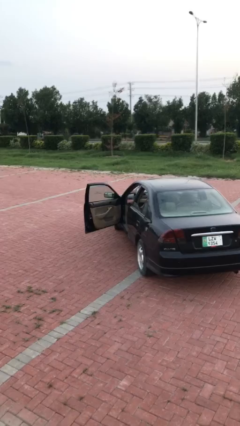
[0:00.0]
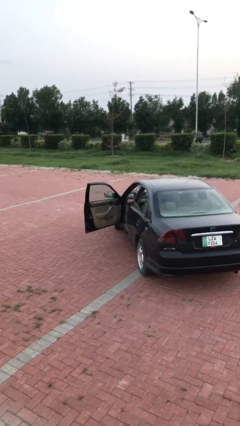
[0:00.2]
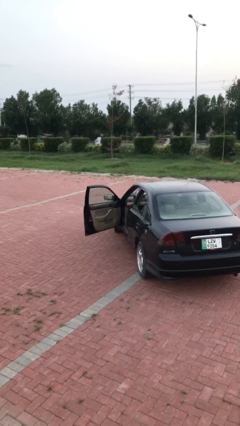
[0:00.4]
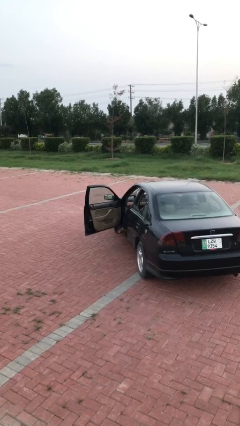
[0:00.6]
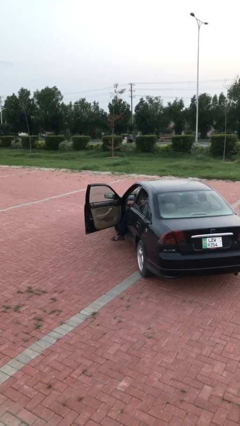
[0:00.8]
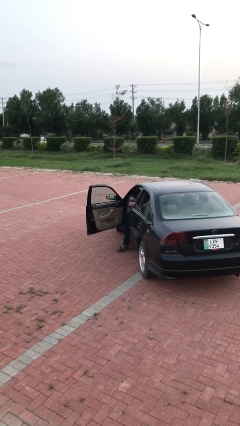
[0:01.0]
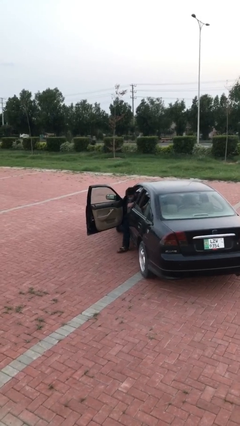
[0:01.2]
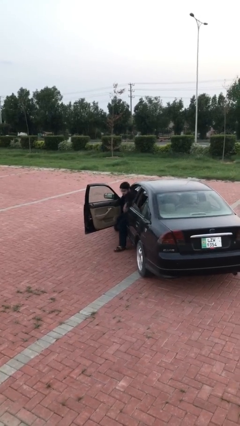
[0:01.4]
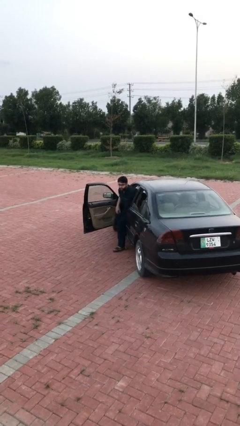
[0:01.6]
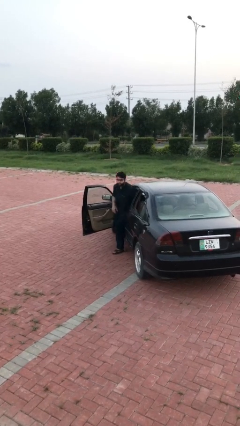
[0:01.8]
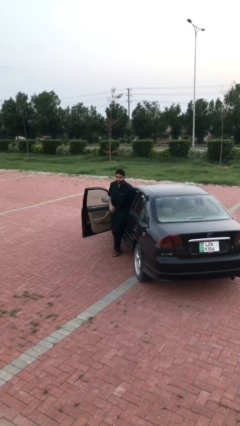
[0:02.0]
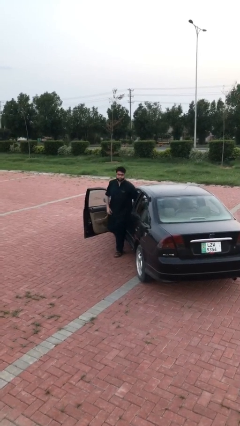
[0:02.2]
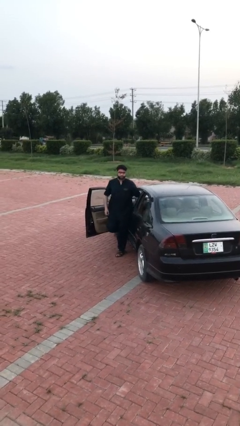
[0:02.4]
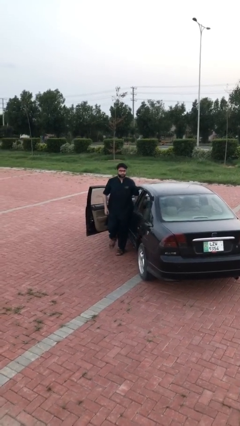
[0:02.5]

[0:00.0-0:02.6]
person exits car

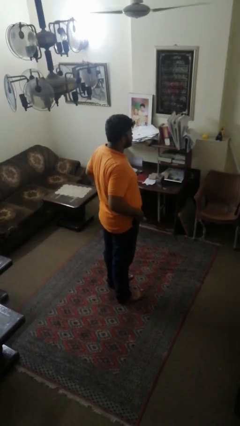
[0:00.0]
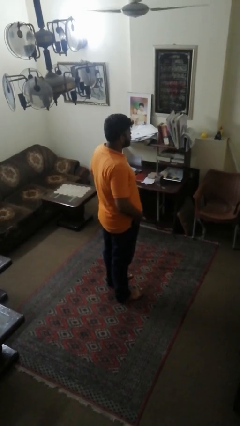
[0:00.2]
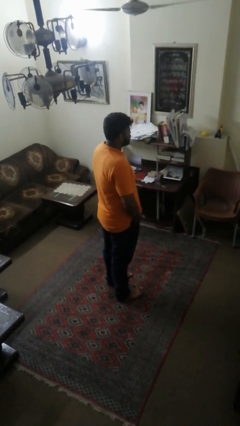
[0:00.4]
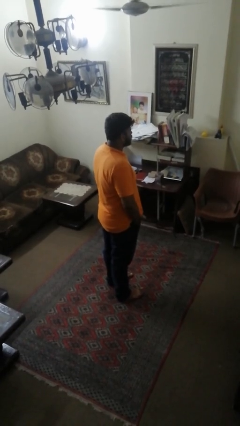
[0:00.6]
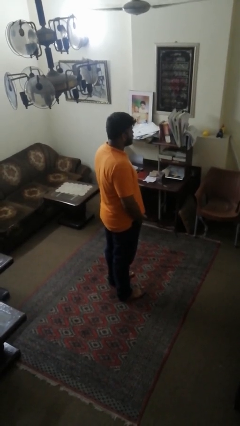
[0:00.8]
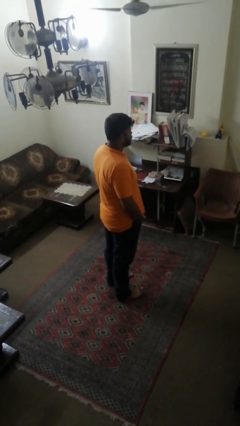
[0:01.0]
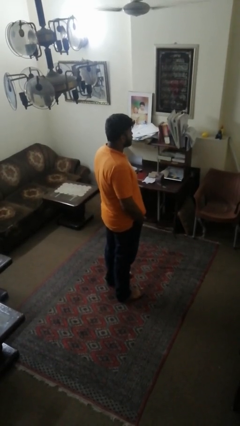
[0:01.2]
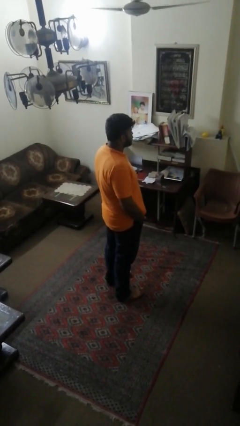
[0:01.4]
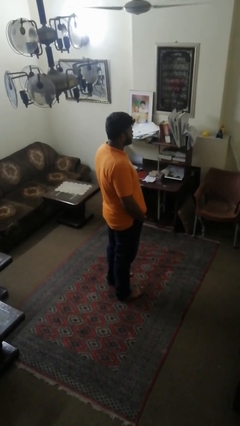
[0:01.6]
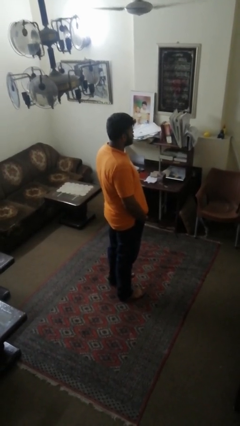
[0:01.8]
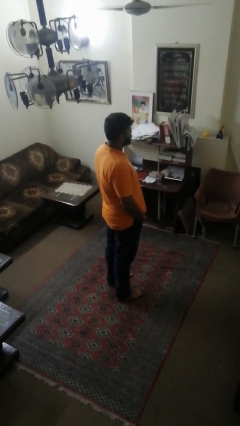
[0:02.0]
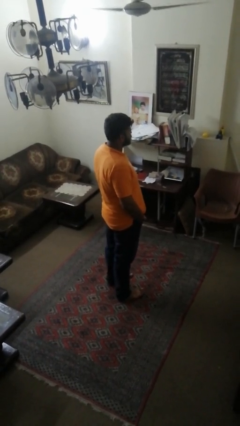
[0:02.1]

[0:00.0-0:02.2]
person puts hands in back pockets

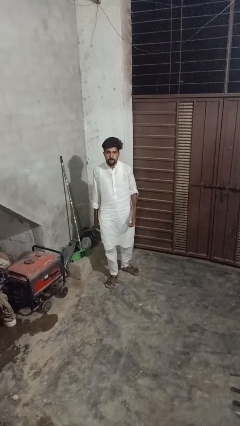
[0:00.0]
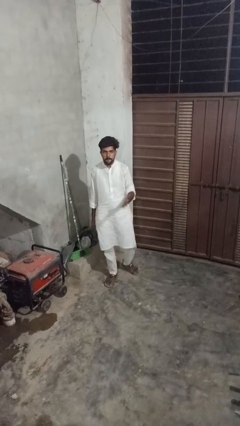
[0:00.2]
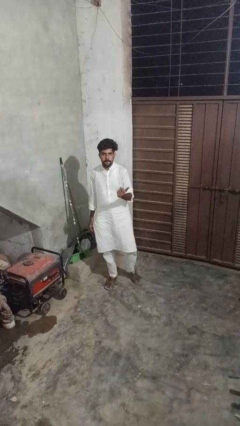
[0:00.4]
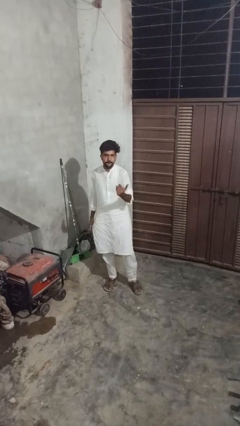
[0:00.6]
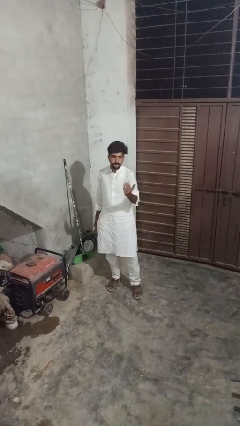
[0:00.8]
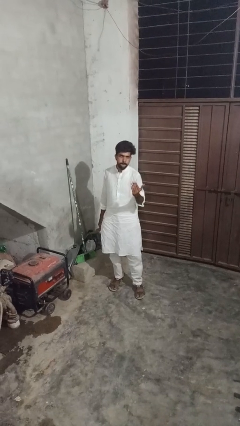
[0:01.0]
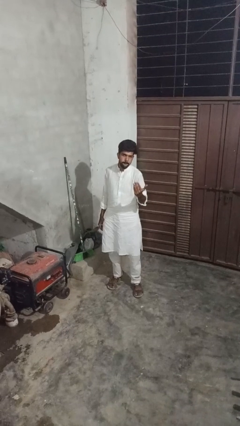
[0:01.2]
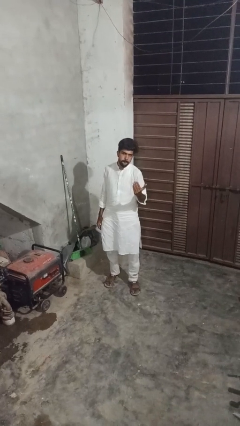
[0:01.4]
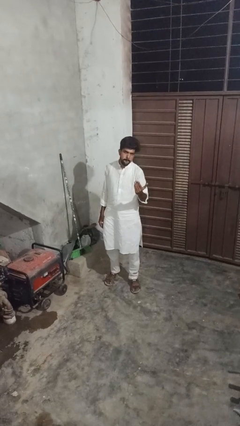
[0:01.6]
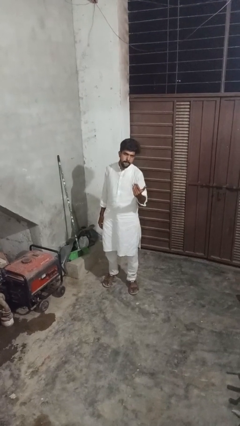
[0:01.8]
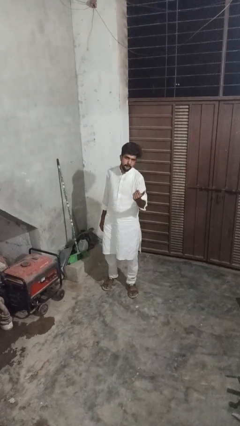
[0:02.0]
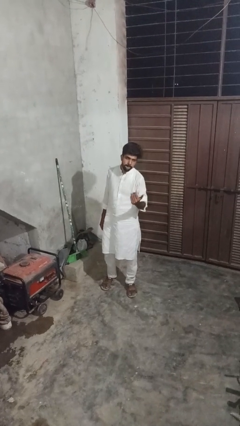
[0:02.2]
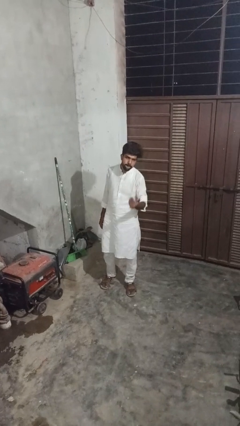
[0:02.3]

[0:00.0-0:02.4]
person gestures come here

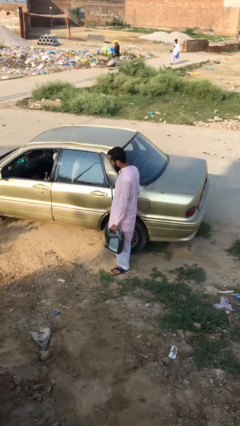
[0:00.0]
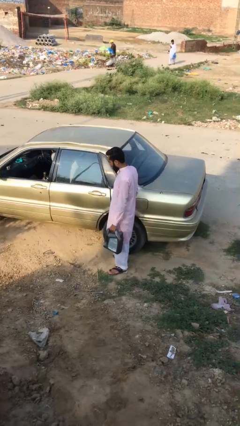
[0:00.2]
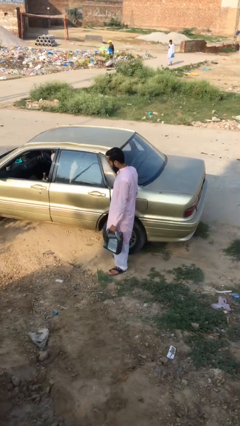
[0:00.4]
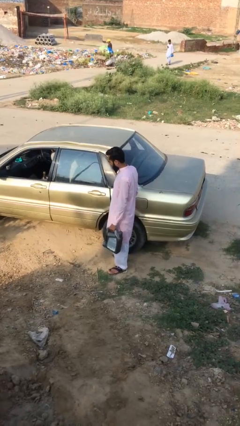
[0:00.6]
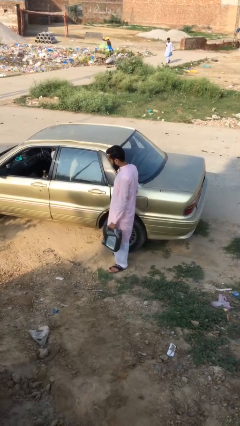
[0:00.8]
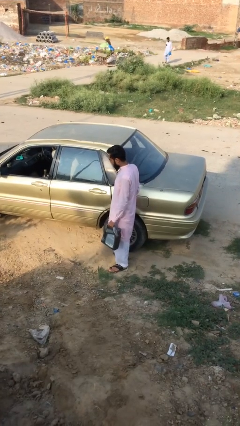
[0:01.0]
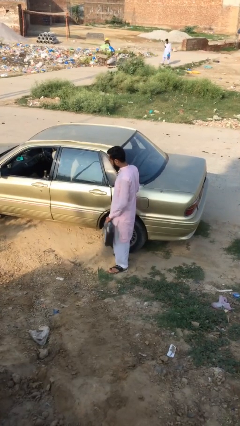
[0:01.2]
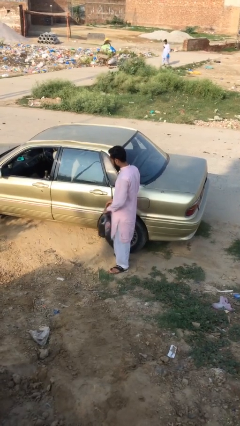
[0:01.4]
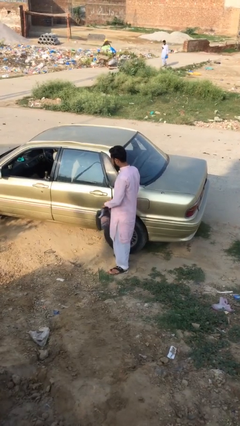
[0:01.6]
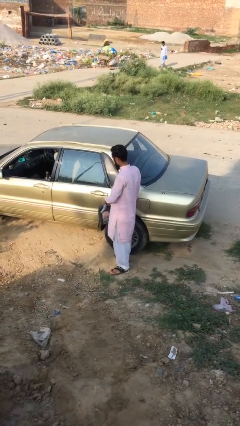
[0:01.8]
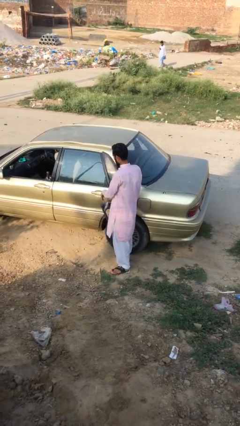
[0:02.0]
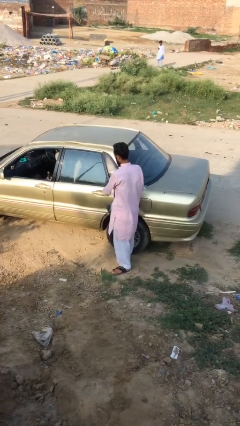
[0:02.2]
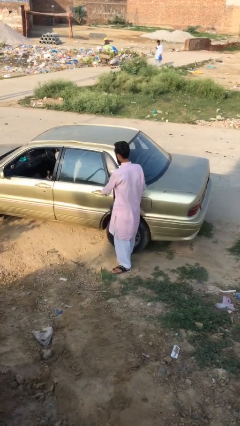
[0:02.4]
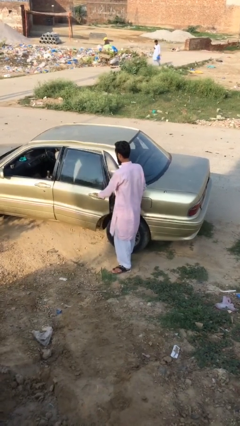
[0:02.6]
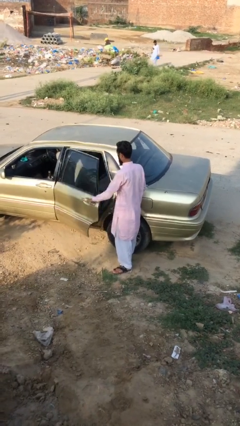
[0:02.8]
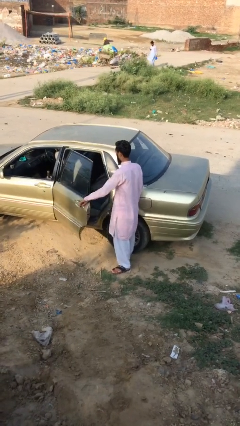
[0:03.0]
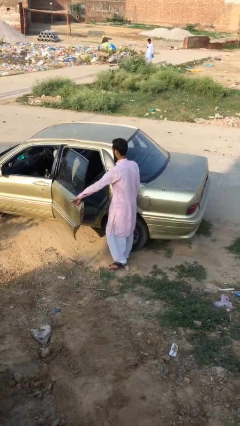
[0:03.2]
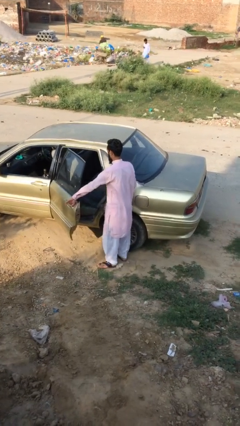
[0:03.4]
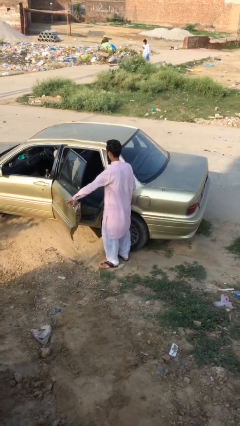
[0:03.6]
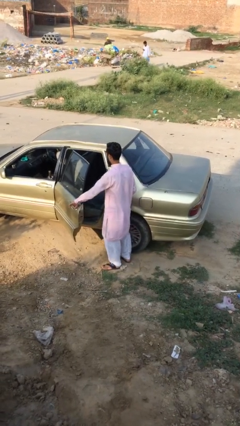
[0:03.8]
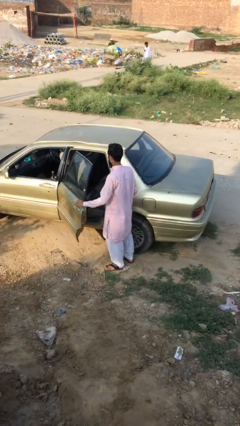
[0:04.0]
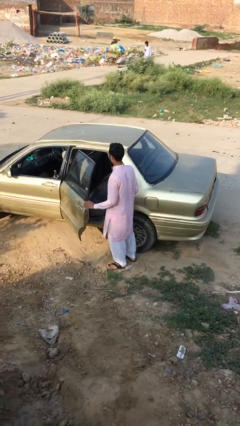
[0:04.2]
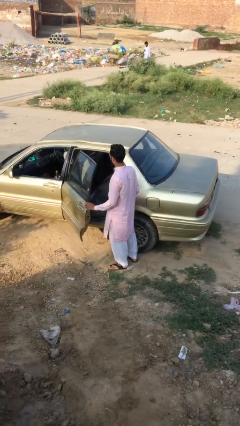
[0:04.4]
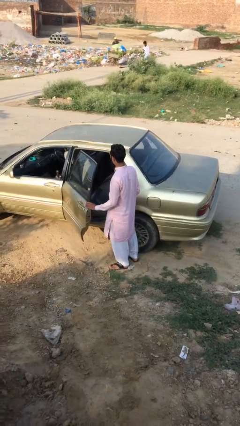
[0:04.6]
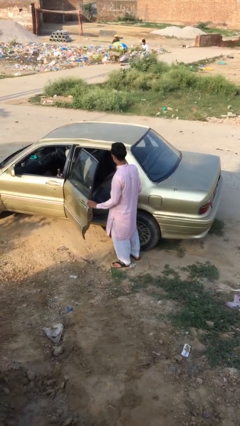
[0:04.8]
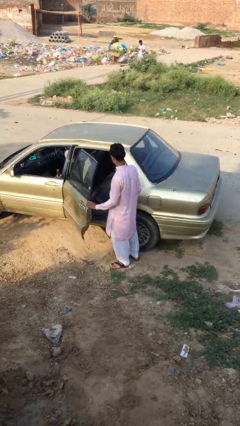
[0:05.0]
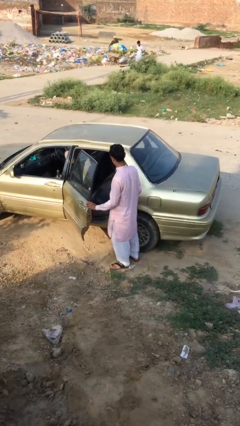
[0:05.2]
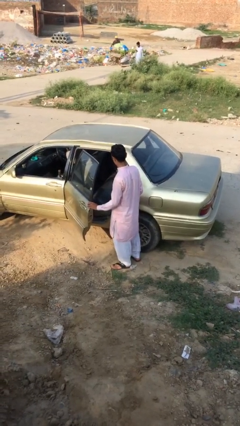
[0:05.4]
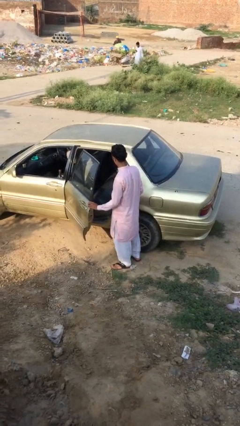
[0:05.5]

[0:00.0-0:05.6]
person opens car door

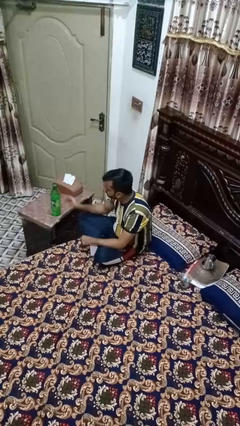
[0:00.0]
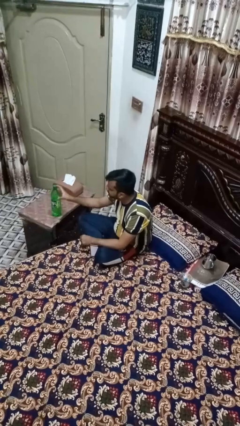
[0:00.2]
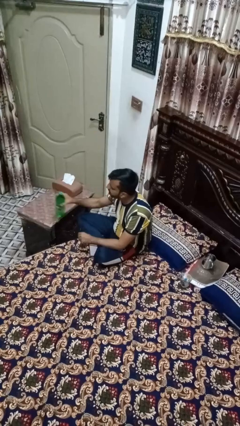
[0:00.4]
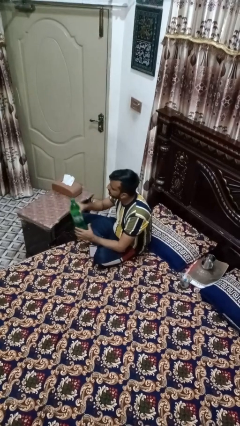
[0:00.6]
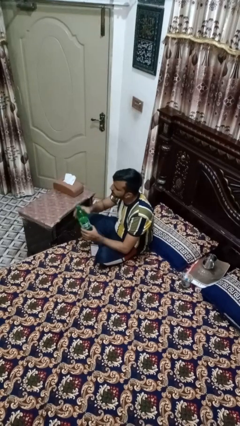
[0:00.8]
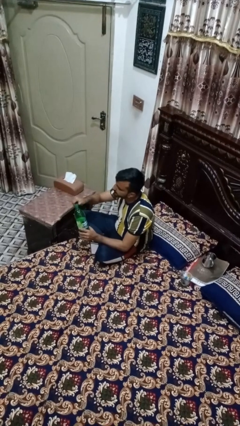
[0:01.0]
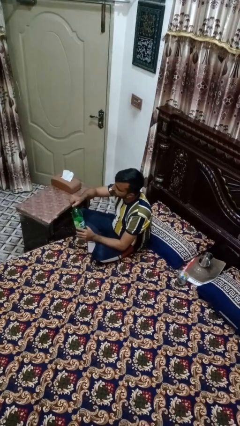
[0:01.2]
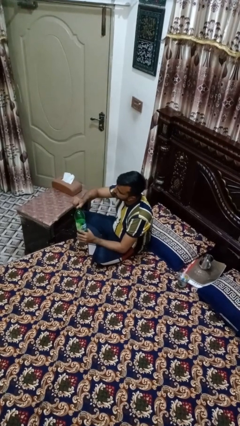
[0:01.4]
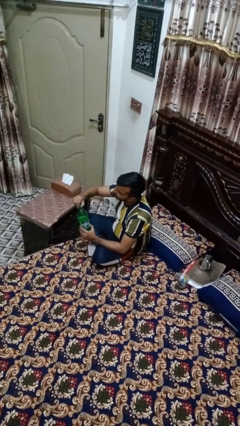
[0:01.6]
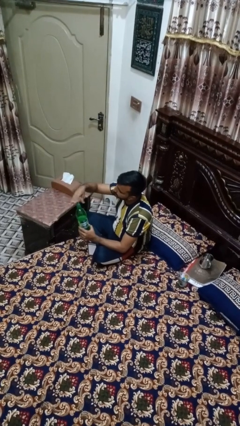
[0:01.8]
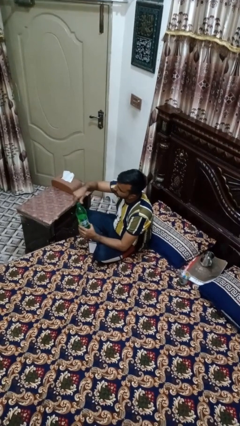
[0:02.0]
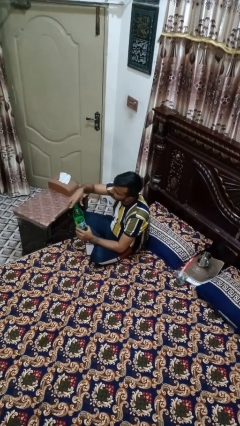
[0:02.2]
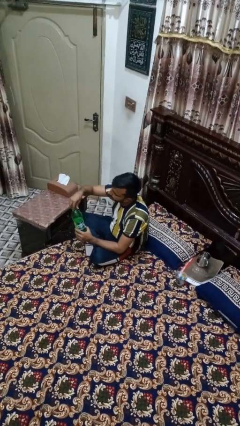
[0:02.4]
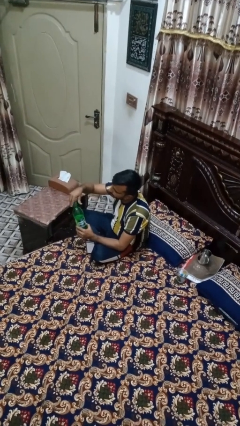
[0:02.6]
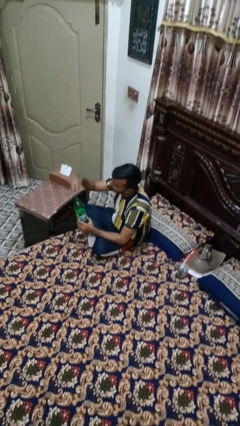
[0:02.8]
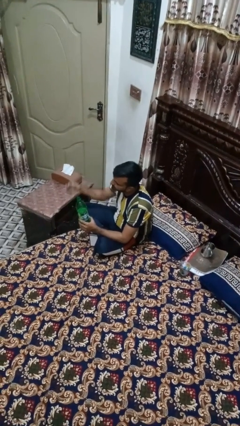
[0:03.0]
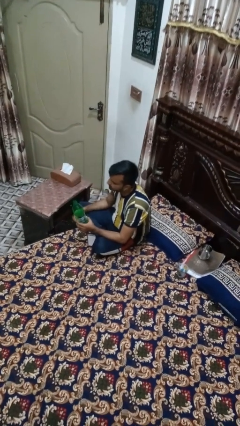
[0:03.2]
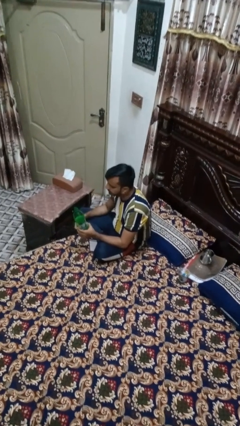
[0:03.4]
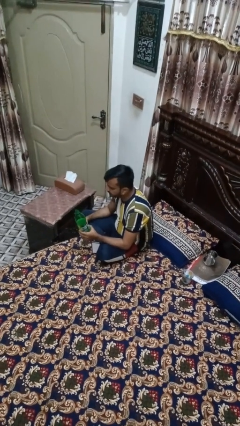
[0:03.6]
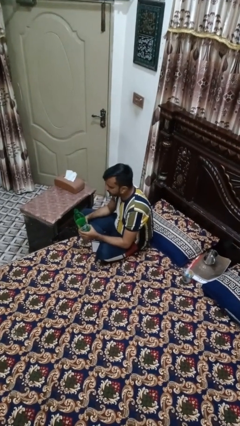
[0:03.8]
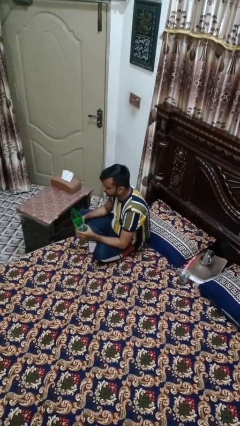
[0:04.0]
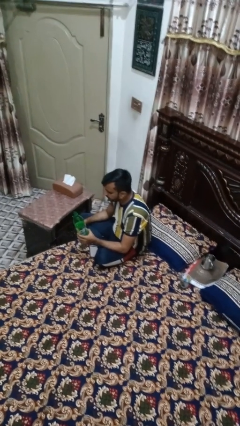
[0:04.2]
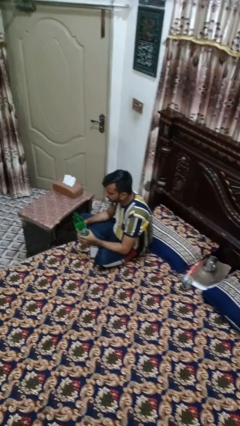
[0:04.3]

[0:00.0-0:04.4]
person unscrews lid from bottle
